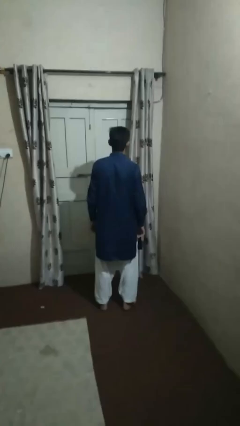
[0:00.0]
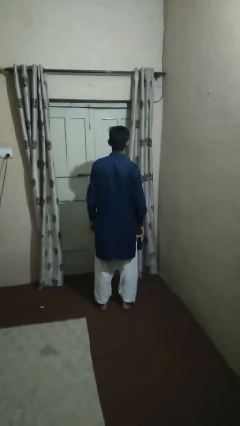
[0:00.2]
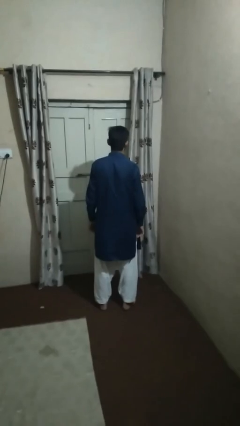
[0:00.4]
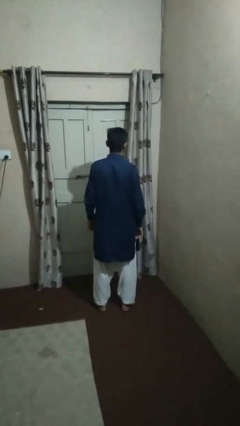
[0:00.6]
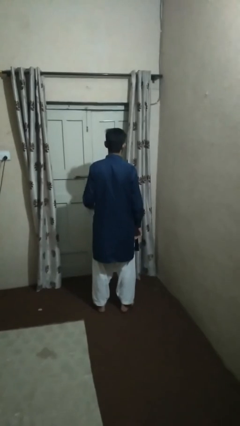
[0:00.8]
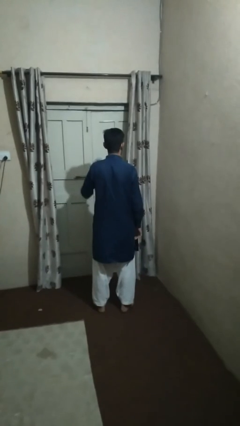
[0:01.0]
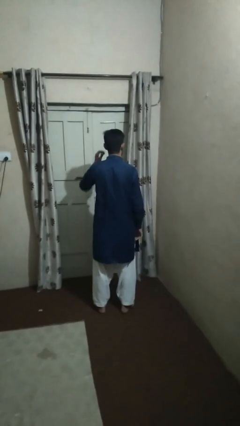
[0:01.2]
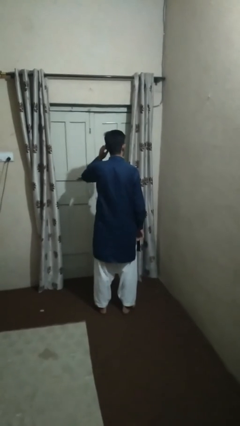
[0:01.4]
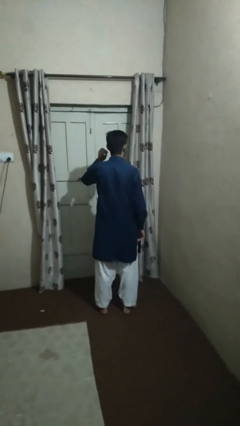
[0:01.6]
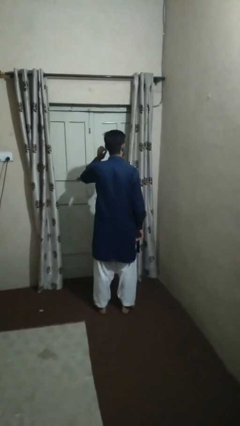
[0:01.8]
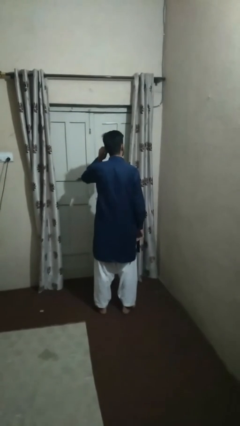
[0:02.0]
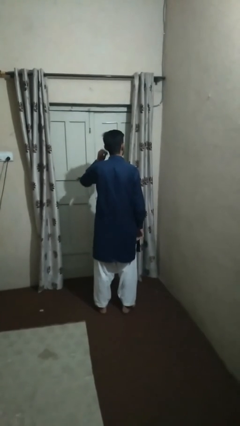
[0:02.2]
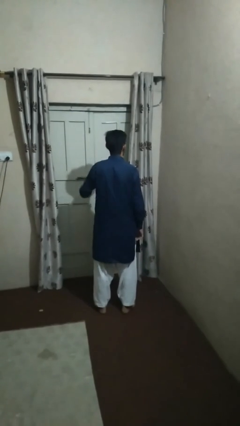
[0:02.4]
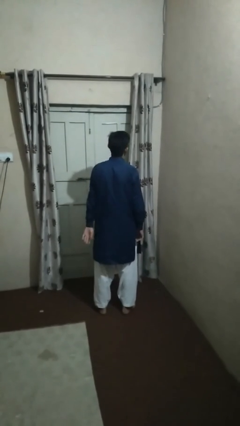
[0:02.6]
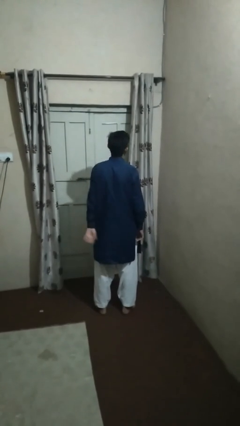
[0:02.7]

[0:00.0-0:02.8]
person touches earlobe

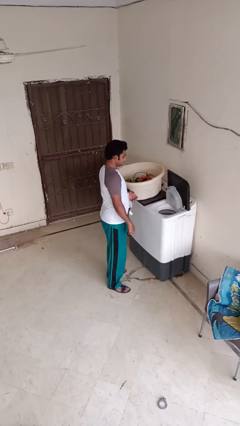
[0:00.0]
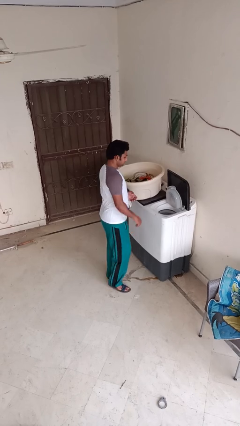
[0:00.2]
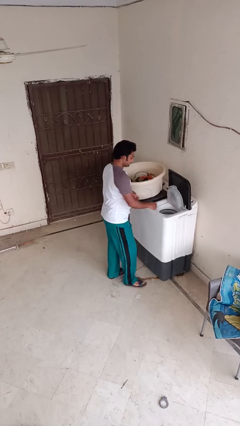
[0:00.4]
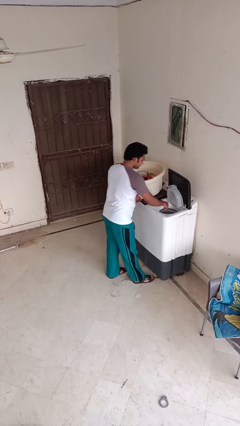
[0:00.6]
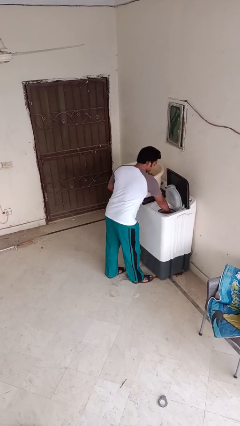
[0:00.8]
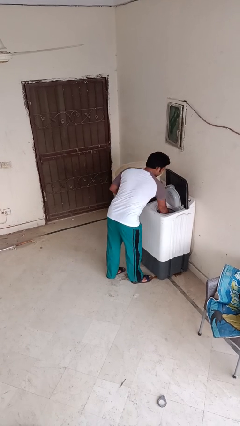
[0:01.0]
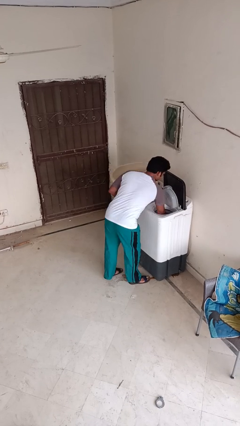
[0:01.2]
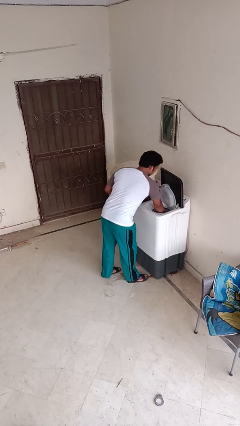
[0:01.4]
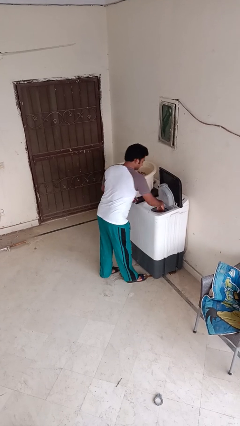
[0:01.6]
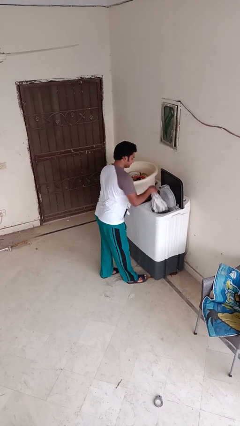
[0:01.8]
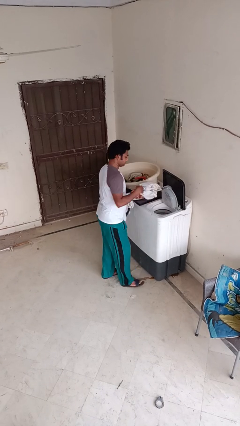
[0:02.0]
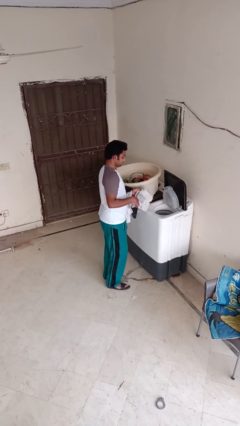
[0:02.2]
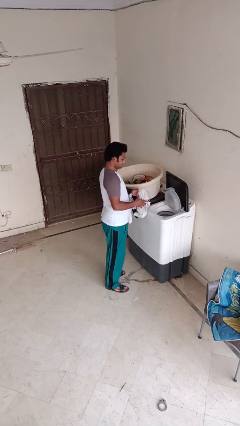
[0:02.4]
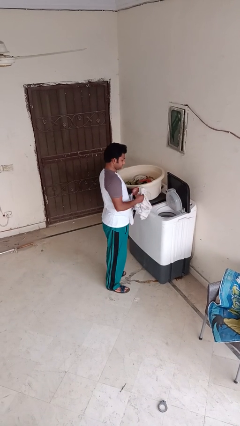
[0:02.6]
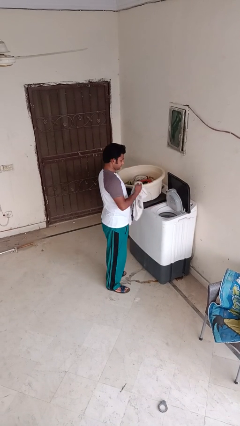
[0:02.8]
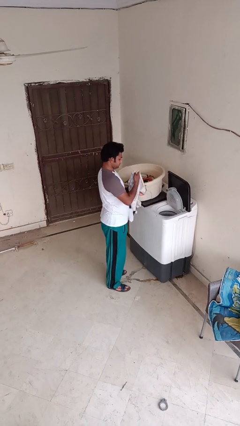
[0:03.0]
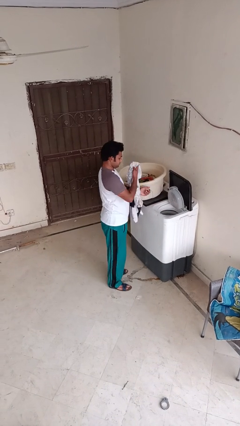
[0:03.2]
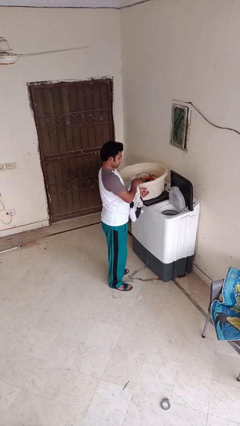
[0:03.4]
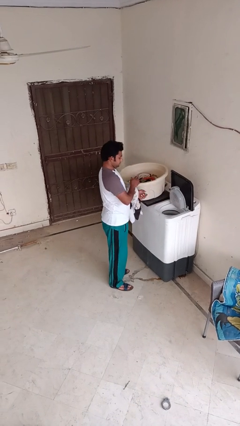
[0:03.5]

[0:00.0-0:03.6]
person unloads dryer

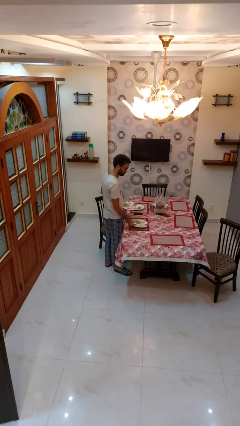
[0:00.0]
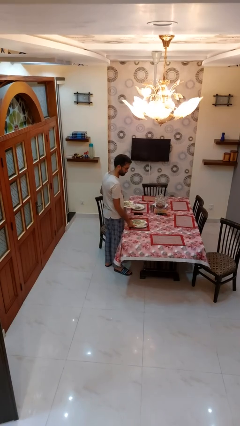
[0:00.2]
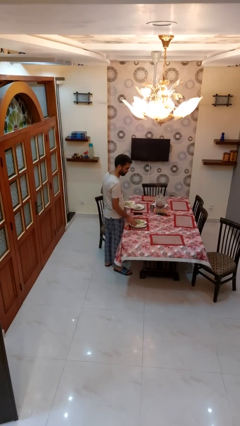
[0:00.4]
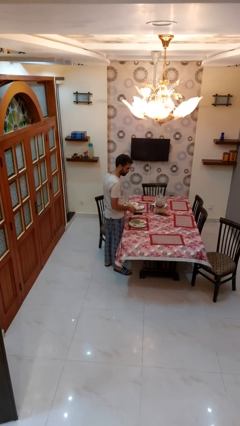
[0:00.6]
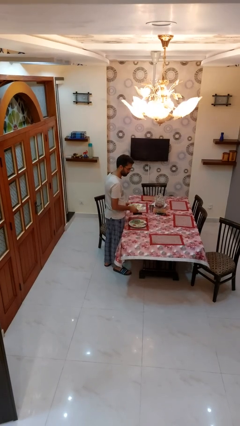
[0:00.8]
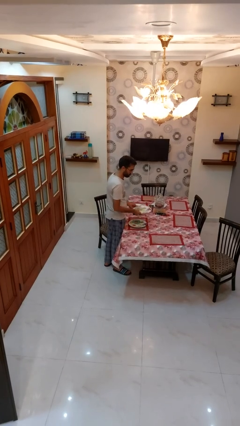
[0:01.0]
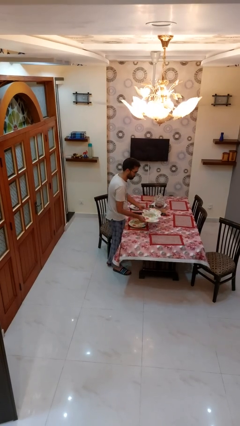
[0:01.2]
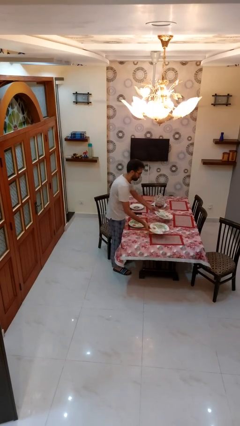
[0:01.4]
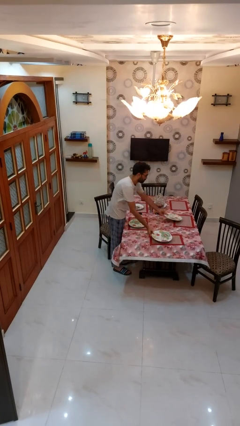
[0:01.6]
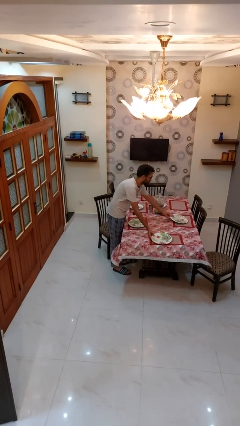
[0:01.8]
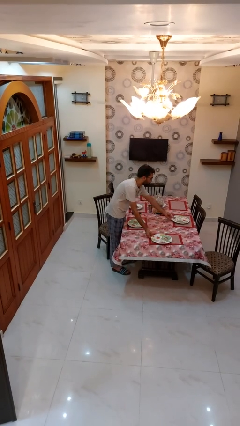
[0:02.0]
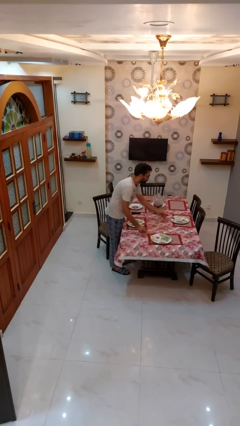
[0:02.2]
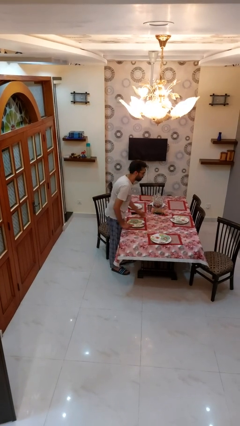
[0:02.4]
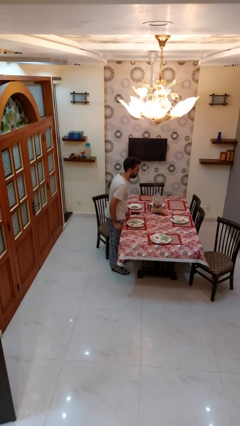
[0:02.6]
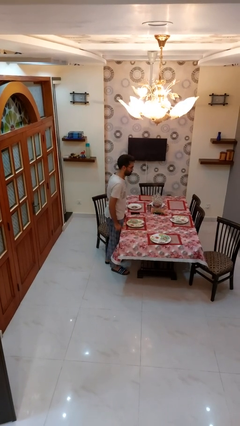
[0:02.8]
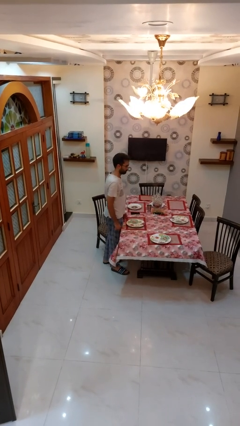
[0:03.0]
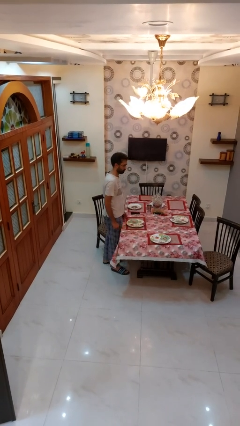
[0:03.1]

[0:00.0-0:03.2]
person sets table

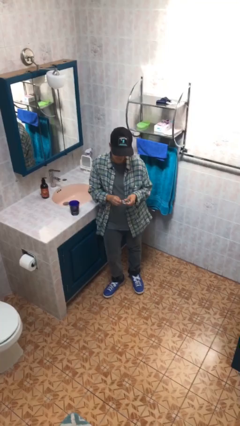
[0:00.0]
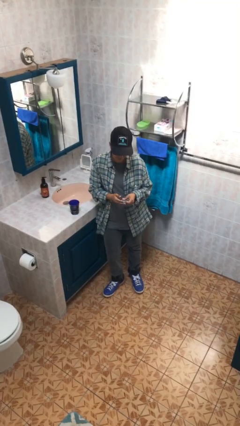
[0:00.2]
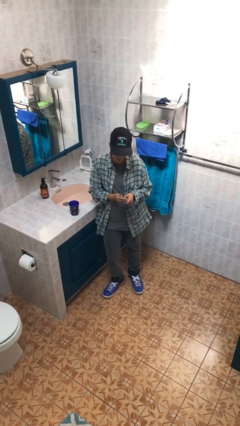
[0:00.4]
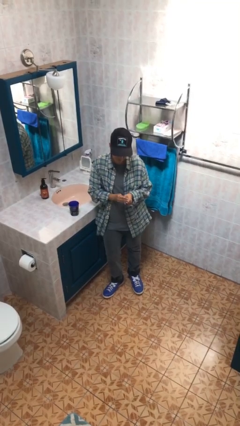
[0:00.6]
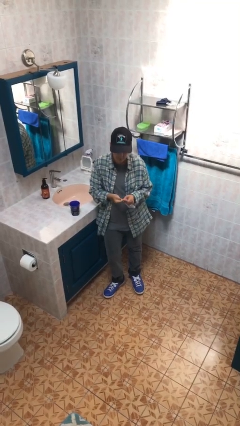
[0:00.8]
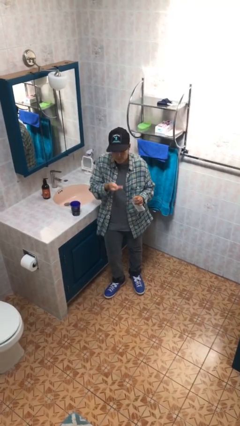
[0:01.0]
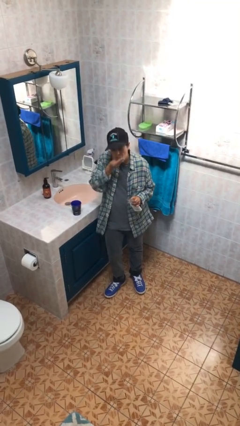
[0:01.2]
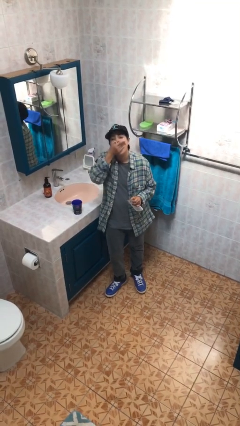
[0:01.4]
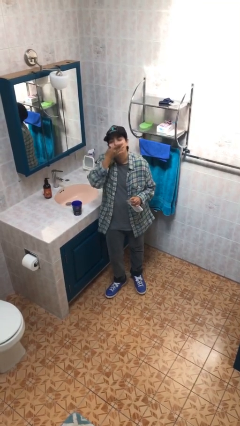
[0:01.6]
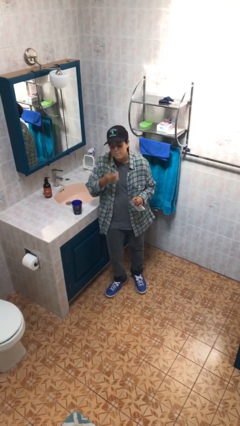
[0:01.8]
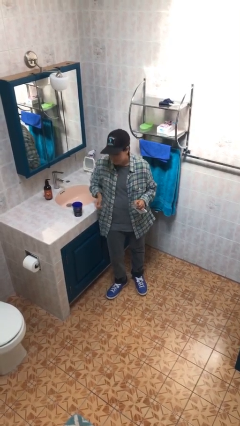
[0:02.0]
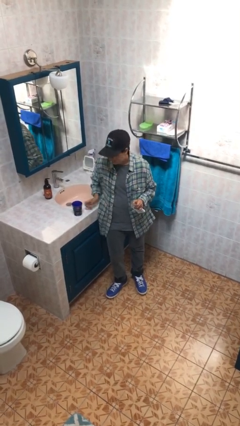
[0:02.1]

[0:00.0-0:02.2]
person takes medicine pills

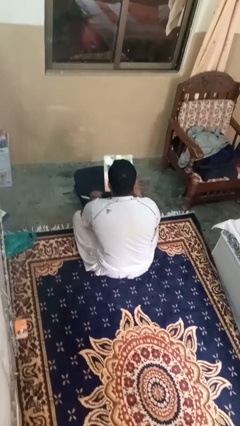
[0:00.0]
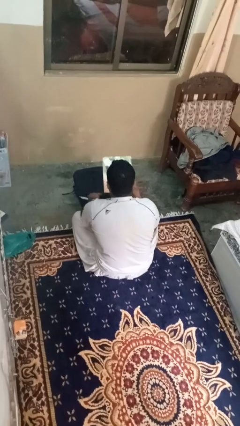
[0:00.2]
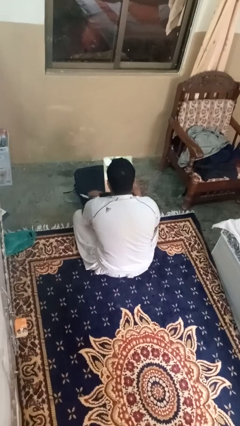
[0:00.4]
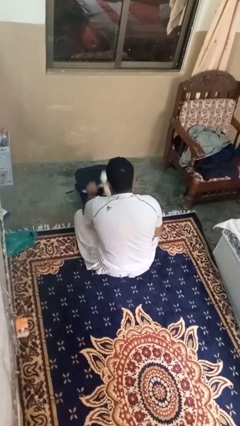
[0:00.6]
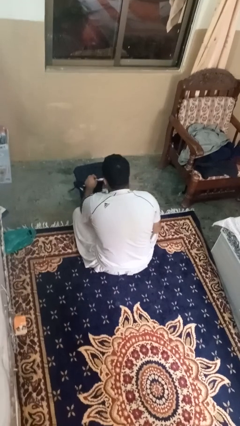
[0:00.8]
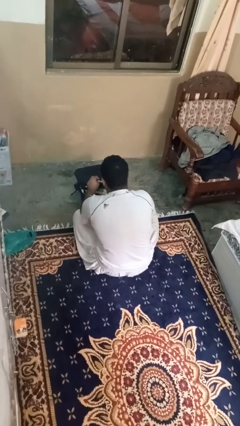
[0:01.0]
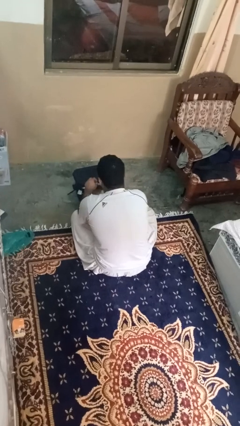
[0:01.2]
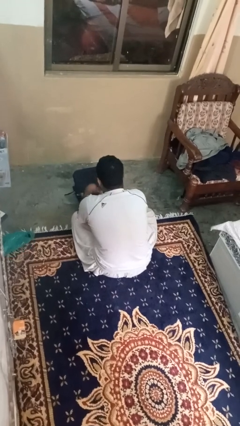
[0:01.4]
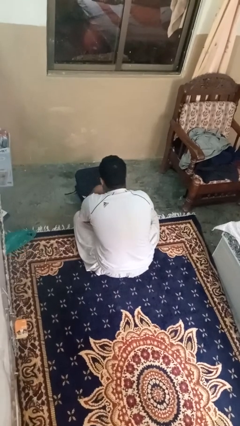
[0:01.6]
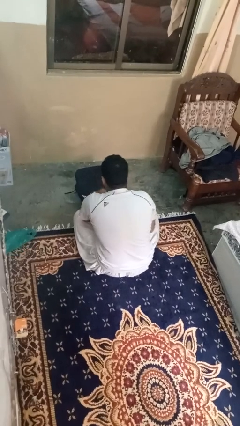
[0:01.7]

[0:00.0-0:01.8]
person puts object into bag

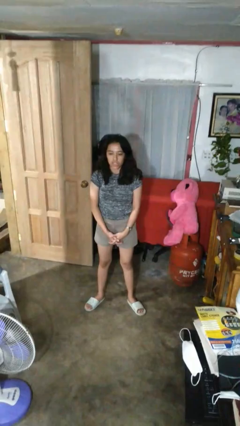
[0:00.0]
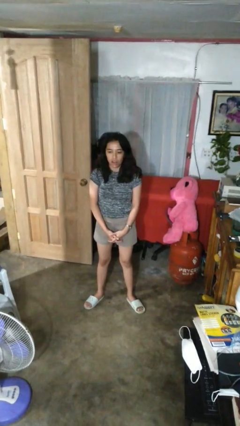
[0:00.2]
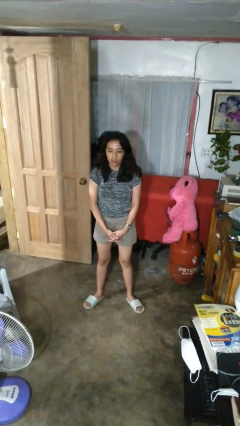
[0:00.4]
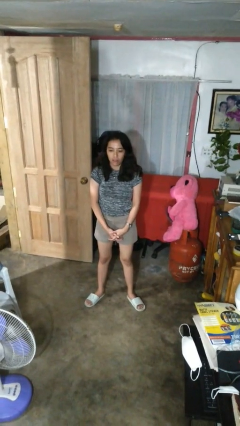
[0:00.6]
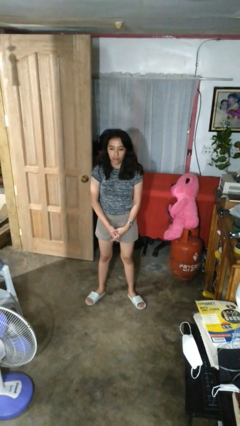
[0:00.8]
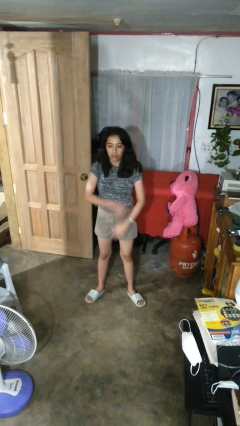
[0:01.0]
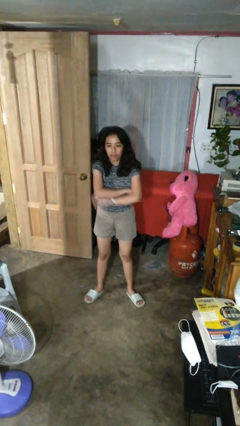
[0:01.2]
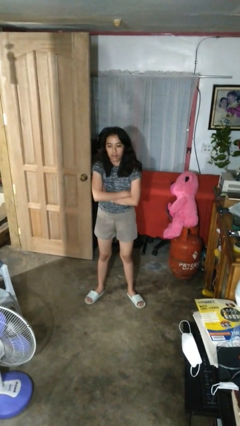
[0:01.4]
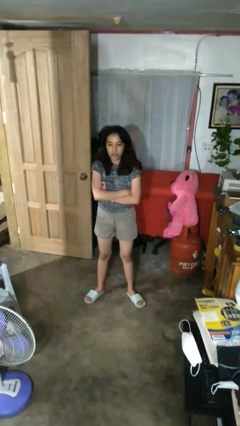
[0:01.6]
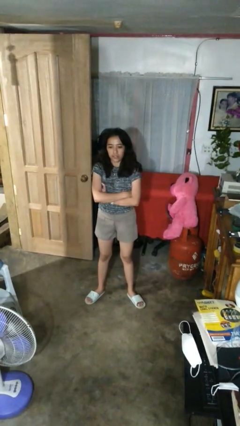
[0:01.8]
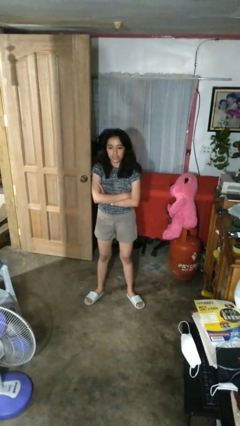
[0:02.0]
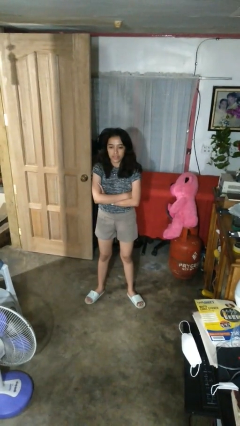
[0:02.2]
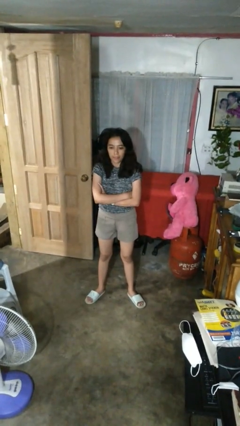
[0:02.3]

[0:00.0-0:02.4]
person crosses arms

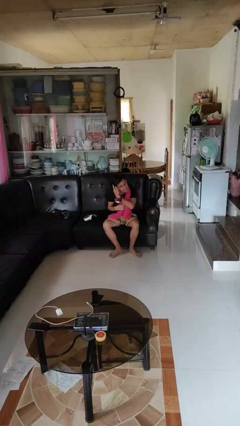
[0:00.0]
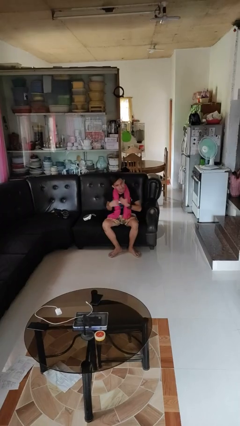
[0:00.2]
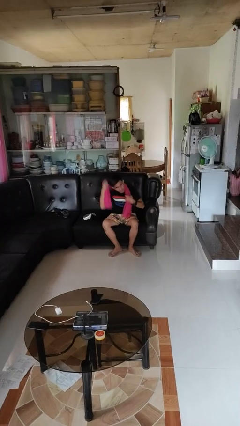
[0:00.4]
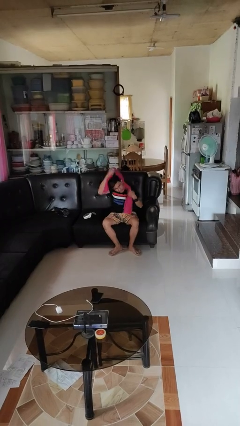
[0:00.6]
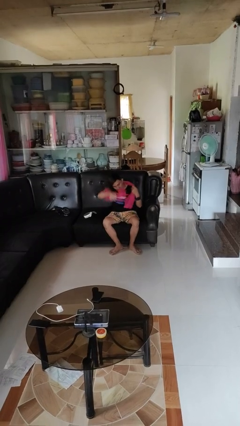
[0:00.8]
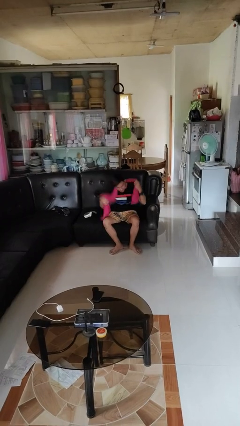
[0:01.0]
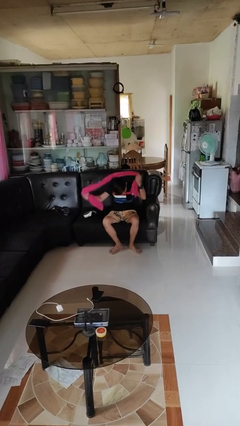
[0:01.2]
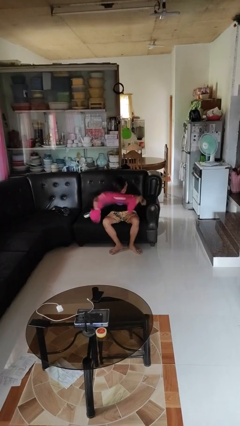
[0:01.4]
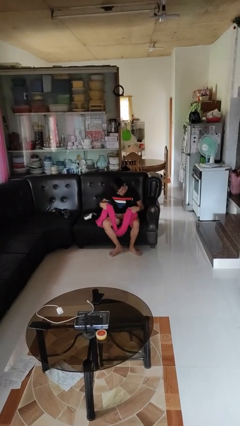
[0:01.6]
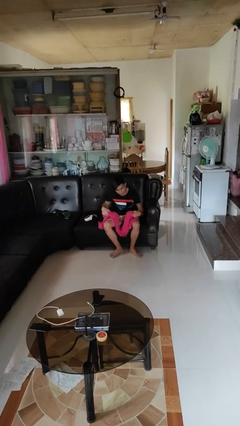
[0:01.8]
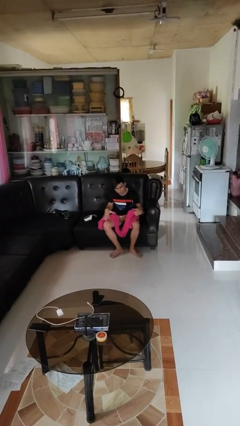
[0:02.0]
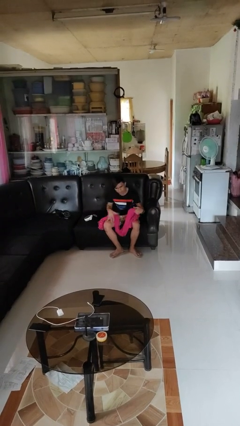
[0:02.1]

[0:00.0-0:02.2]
person takes off scarf
